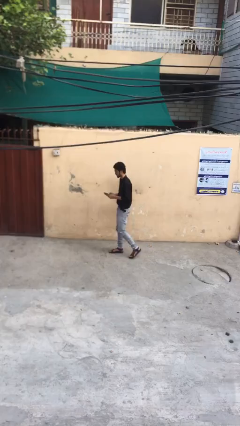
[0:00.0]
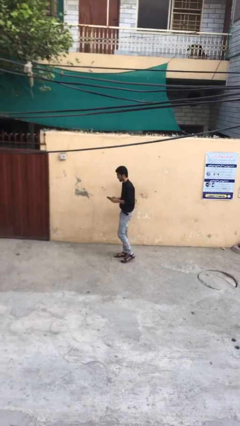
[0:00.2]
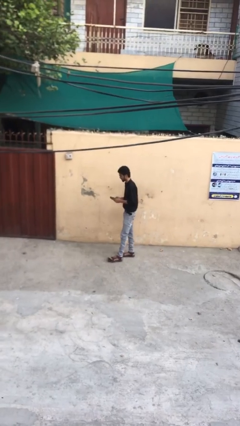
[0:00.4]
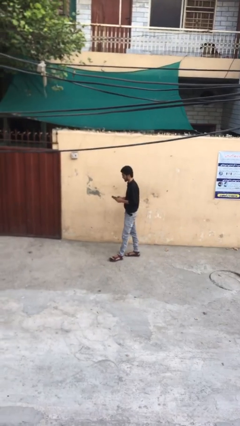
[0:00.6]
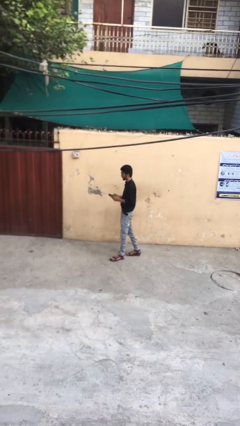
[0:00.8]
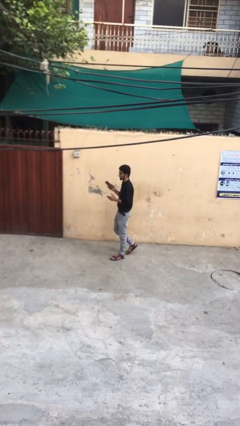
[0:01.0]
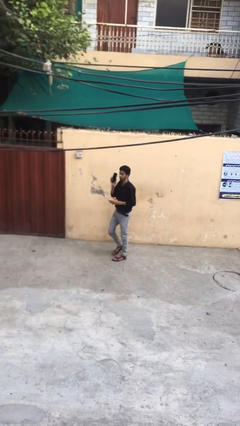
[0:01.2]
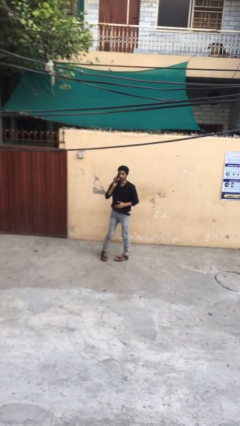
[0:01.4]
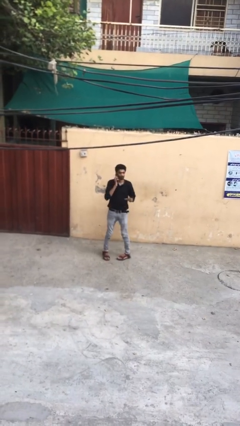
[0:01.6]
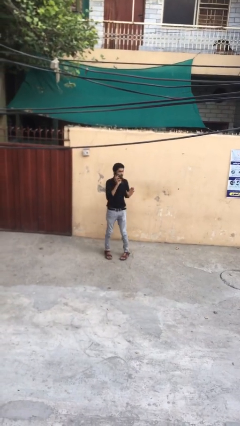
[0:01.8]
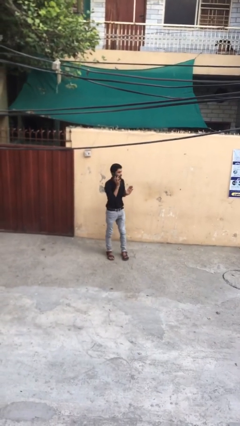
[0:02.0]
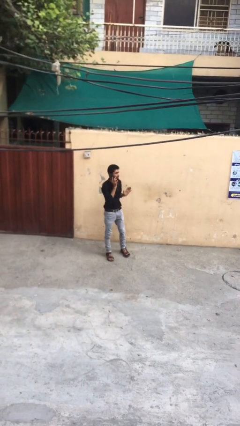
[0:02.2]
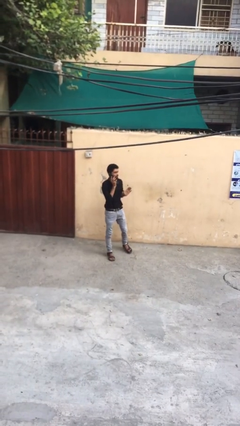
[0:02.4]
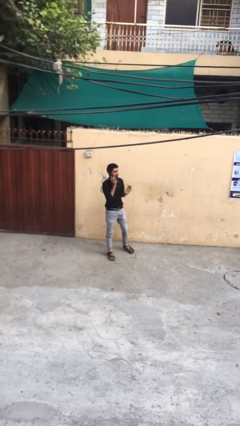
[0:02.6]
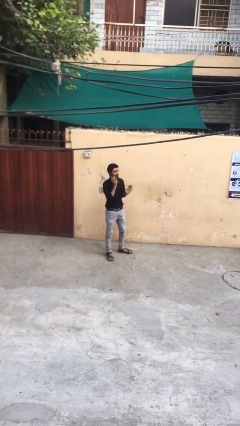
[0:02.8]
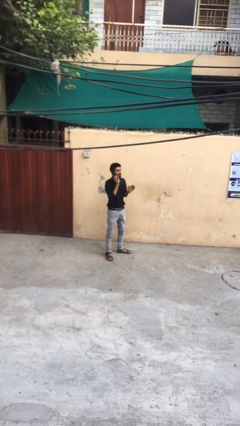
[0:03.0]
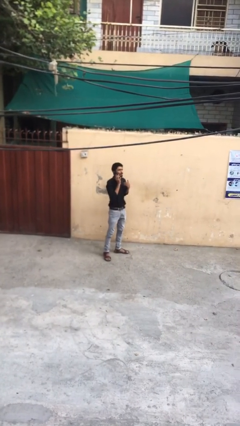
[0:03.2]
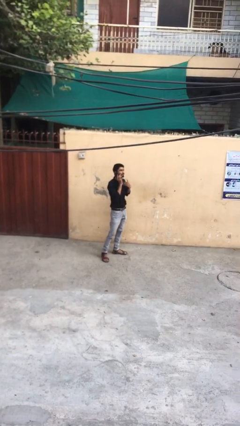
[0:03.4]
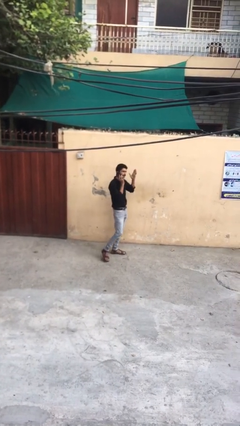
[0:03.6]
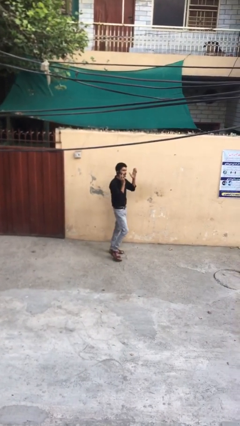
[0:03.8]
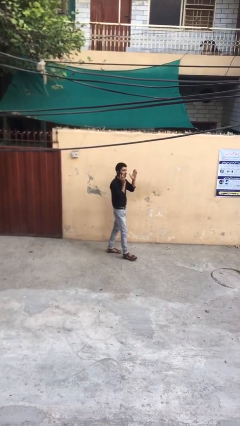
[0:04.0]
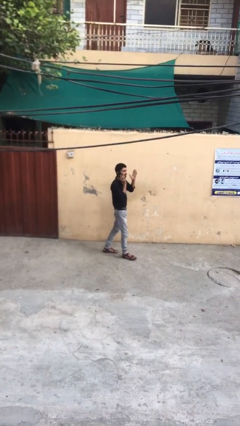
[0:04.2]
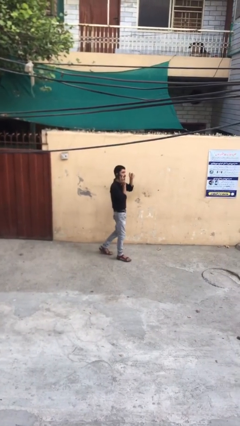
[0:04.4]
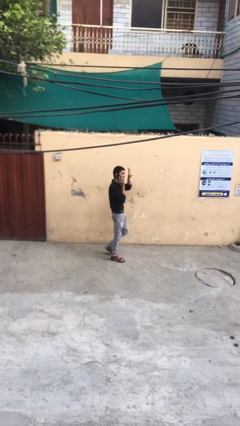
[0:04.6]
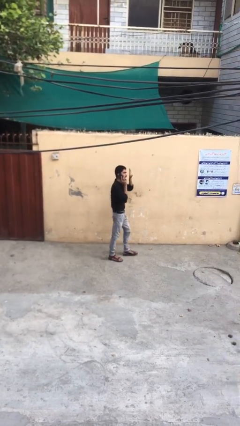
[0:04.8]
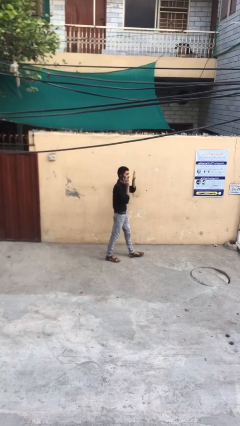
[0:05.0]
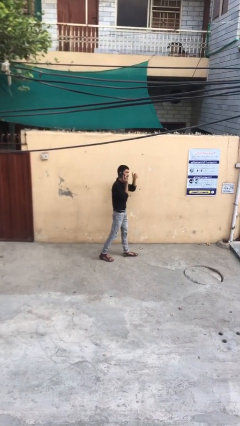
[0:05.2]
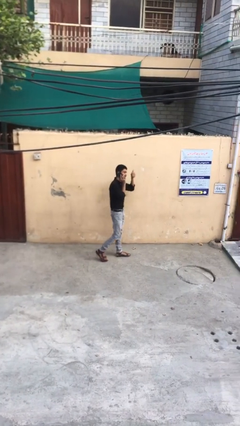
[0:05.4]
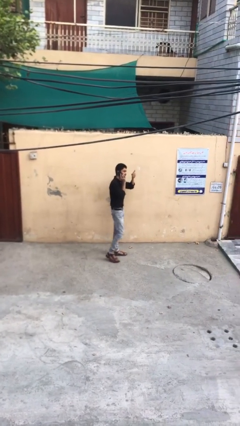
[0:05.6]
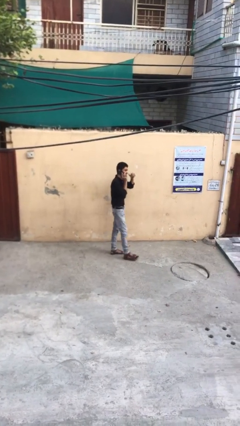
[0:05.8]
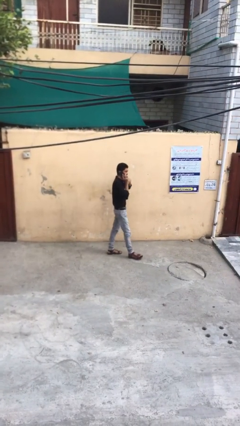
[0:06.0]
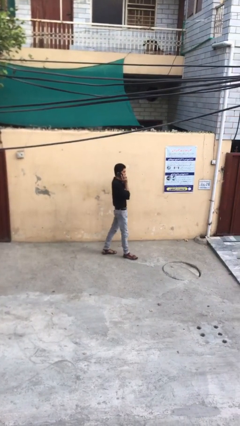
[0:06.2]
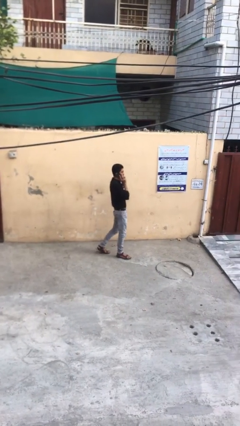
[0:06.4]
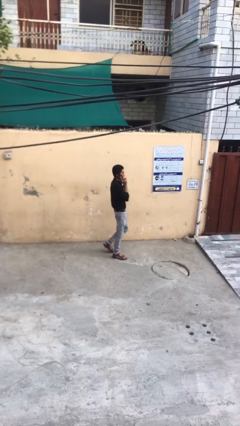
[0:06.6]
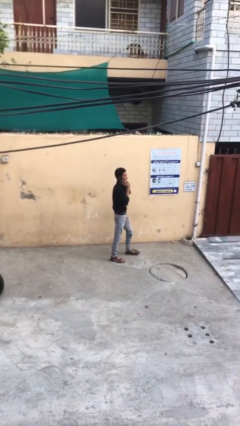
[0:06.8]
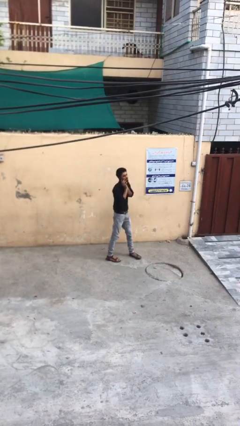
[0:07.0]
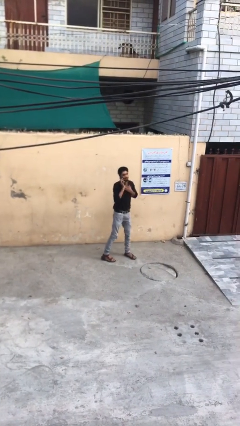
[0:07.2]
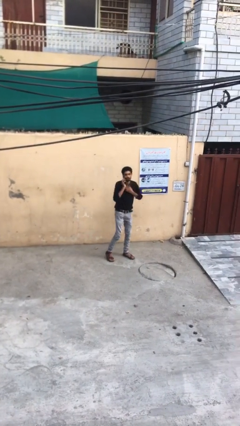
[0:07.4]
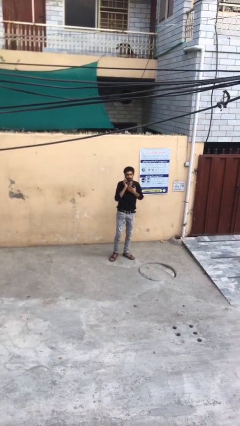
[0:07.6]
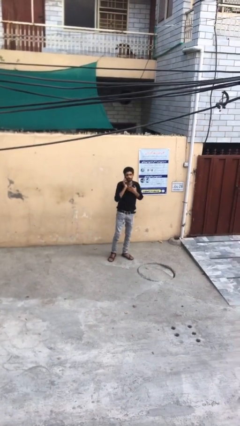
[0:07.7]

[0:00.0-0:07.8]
person talks on phone

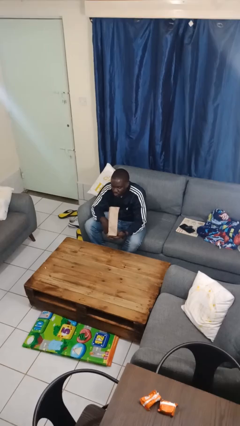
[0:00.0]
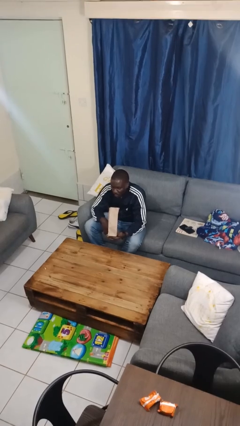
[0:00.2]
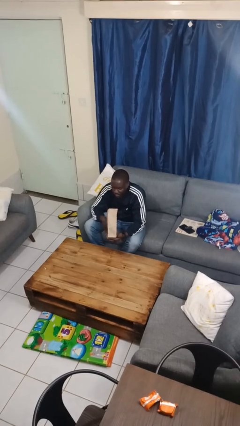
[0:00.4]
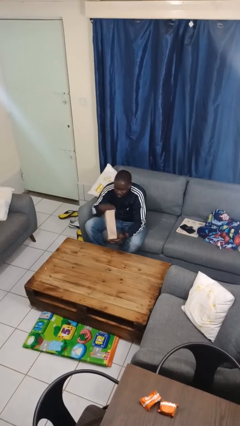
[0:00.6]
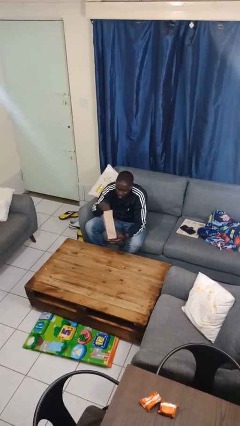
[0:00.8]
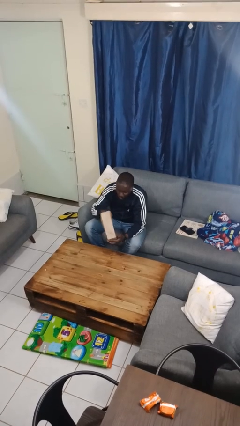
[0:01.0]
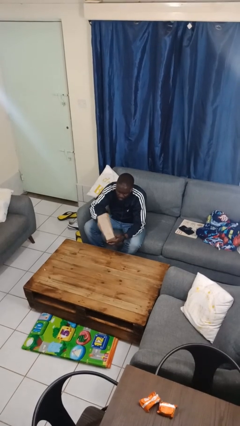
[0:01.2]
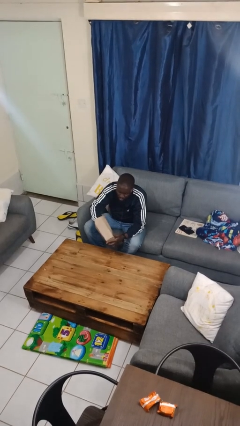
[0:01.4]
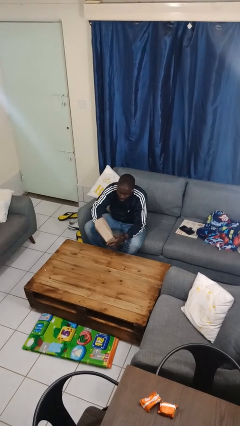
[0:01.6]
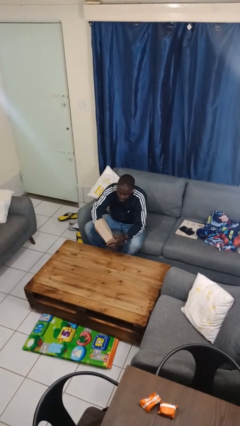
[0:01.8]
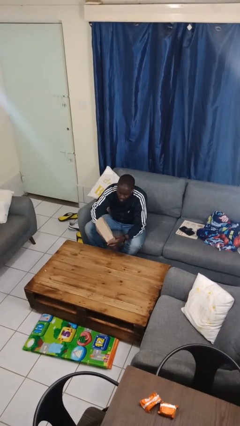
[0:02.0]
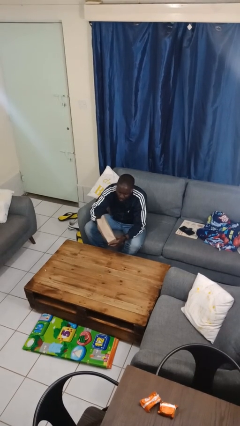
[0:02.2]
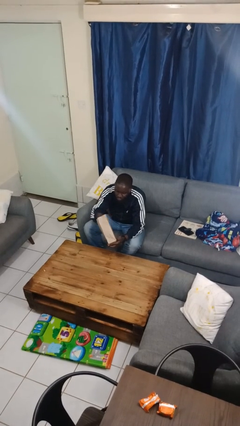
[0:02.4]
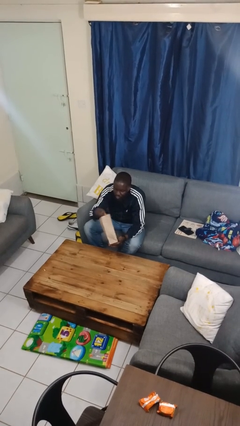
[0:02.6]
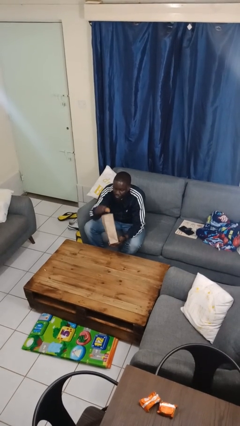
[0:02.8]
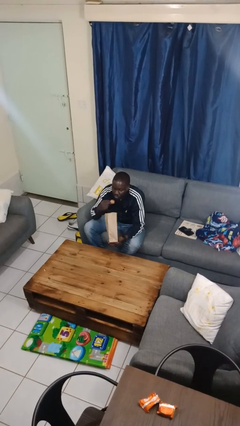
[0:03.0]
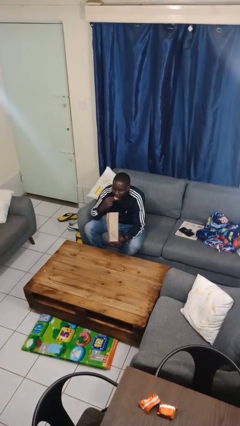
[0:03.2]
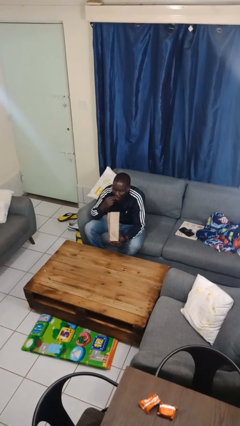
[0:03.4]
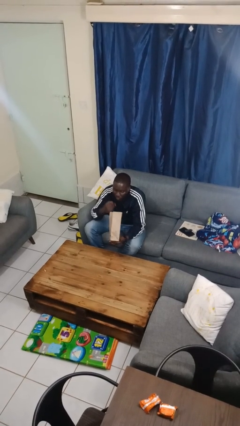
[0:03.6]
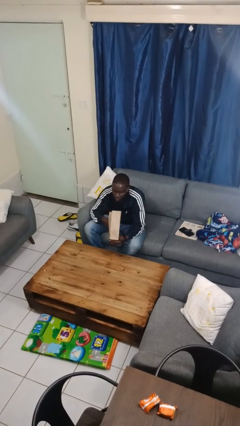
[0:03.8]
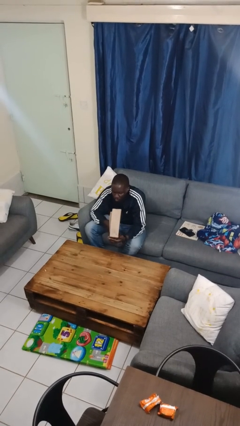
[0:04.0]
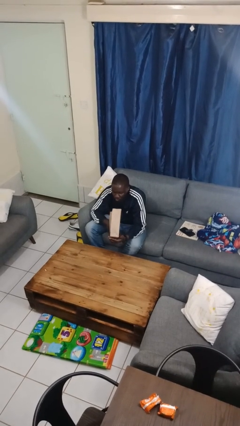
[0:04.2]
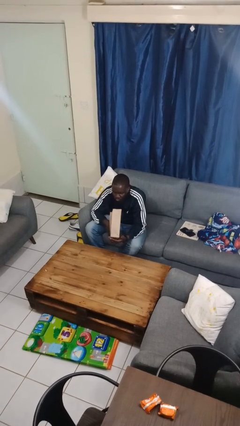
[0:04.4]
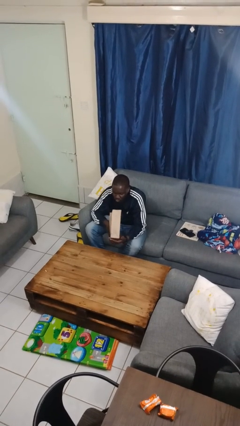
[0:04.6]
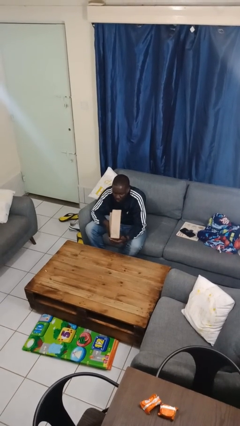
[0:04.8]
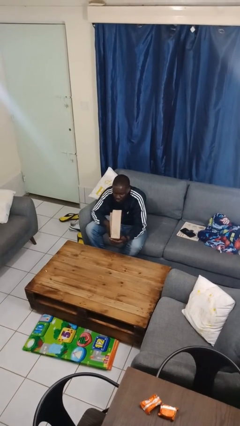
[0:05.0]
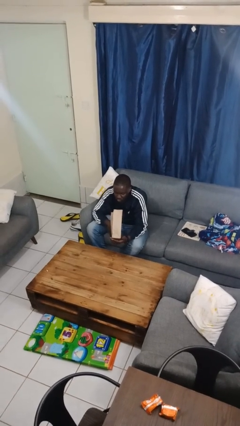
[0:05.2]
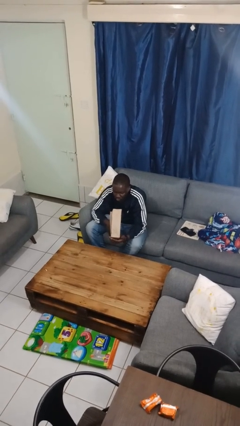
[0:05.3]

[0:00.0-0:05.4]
person eats snack from bag

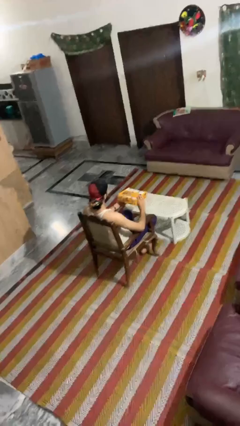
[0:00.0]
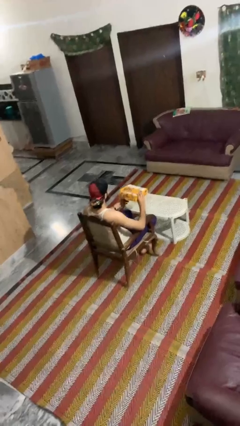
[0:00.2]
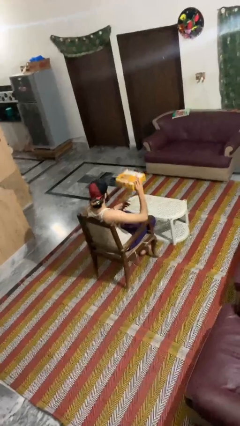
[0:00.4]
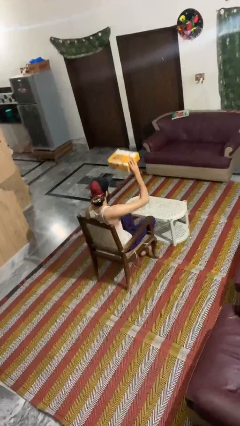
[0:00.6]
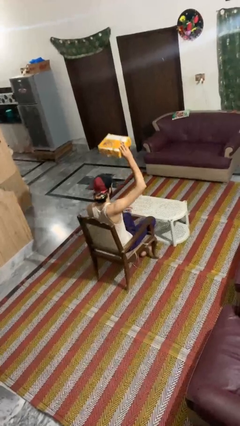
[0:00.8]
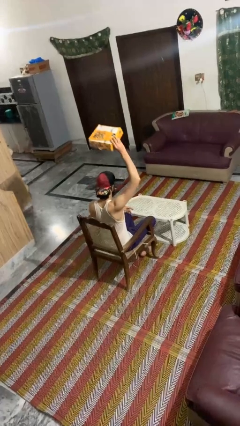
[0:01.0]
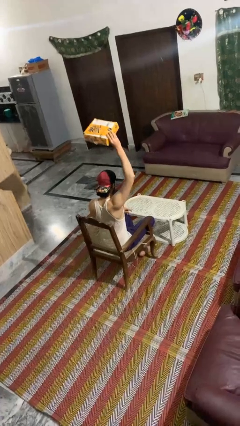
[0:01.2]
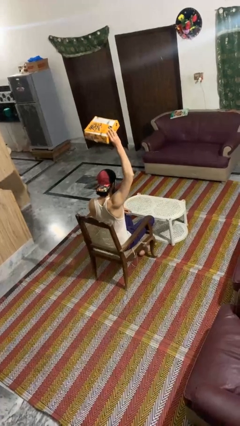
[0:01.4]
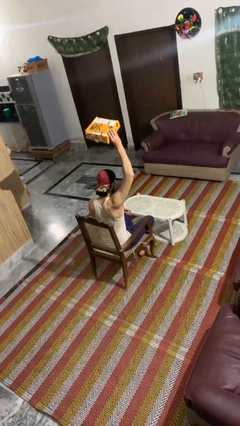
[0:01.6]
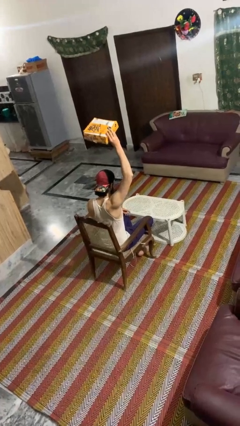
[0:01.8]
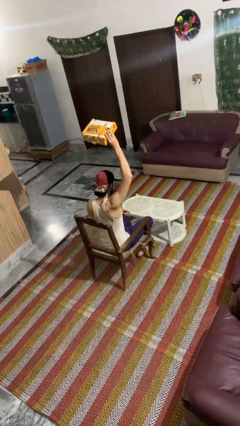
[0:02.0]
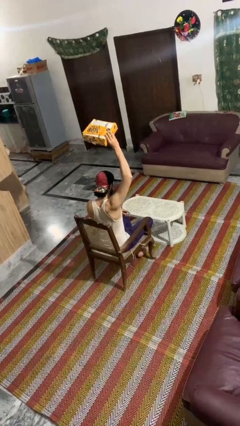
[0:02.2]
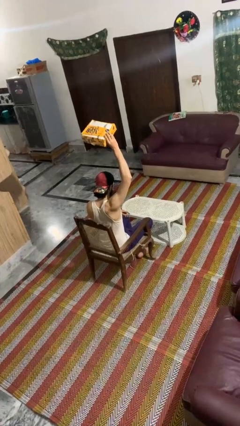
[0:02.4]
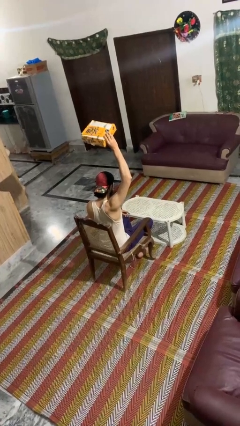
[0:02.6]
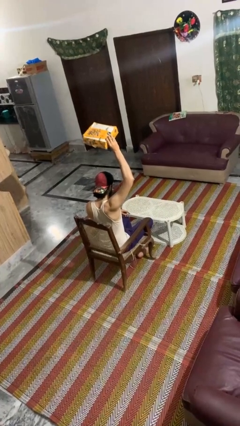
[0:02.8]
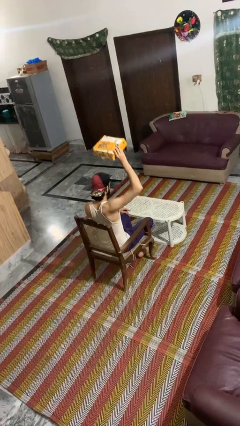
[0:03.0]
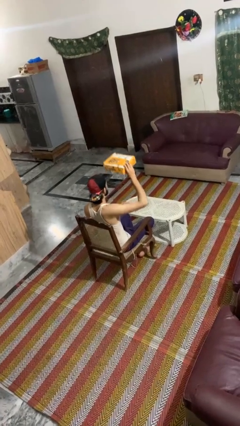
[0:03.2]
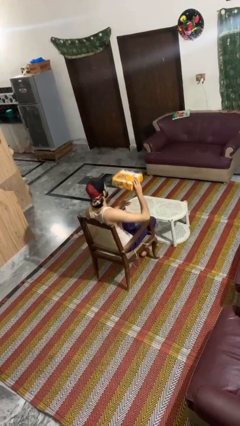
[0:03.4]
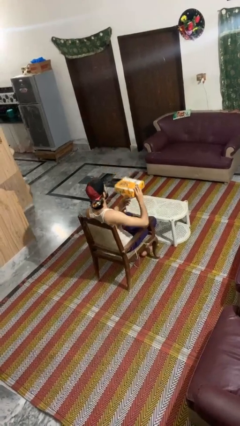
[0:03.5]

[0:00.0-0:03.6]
person holds object above head

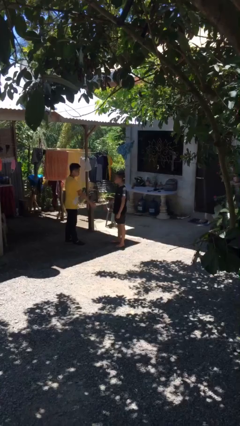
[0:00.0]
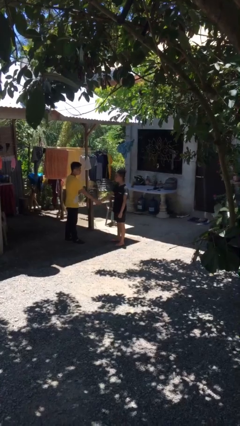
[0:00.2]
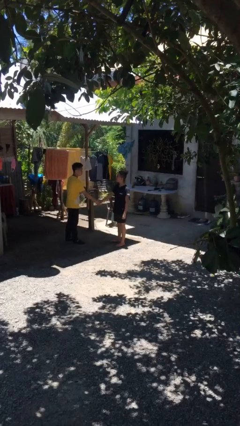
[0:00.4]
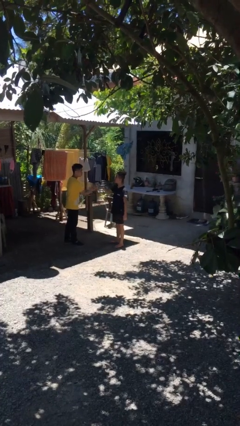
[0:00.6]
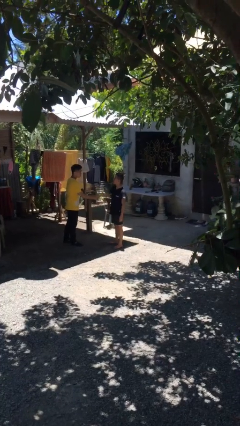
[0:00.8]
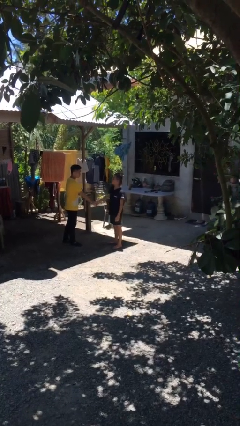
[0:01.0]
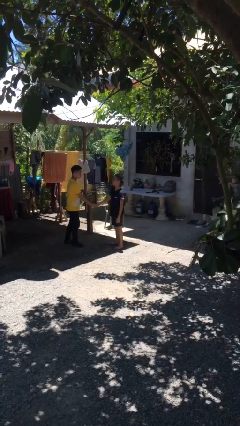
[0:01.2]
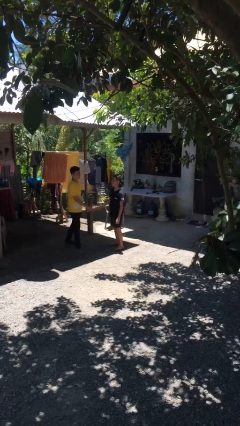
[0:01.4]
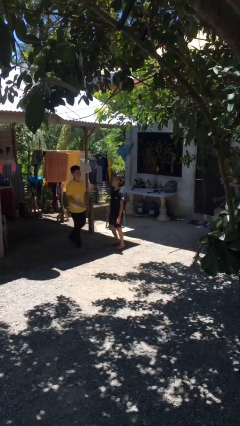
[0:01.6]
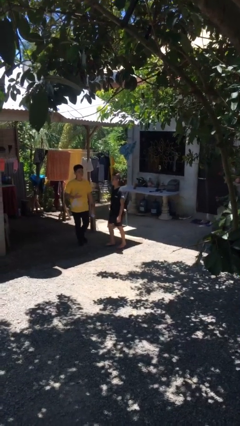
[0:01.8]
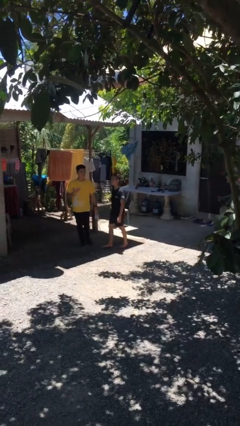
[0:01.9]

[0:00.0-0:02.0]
person shakes hand
